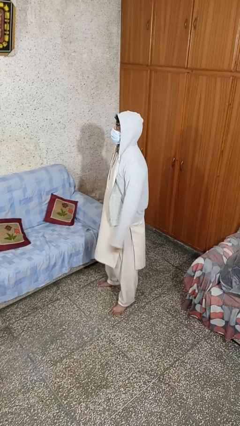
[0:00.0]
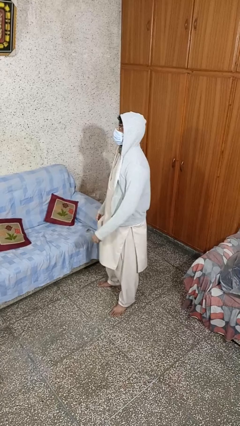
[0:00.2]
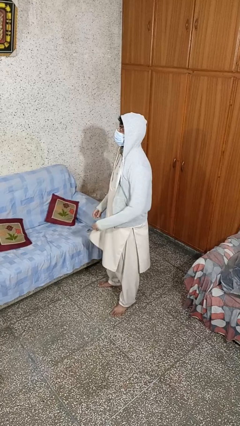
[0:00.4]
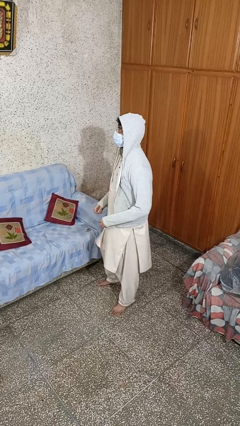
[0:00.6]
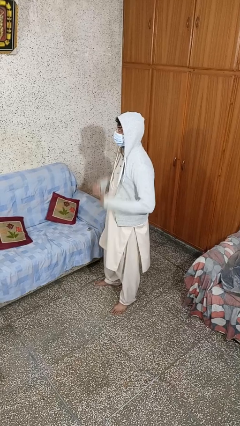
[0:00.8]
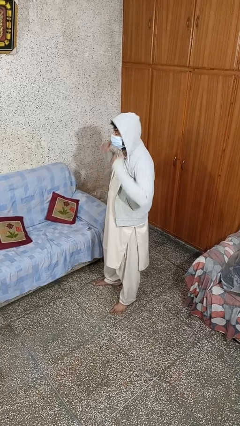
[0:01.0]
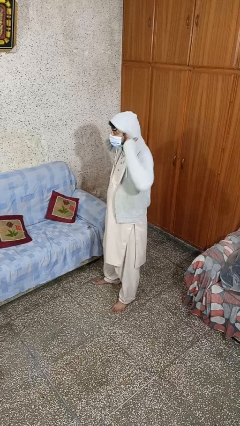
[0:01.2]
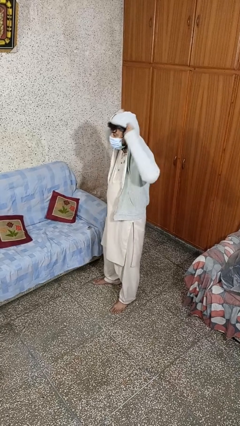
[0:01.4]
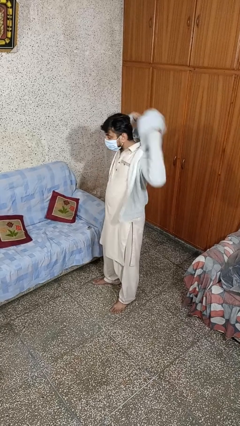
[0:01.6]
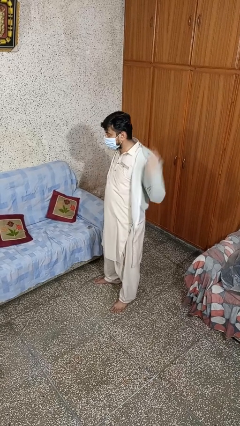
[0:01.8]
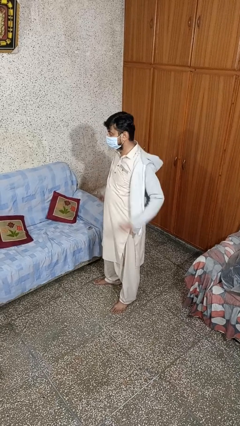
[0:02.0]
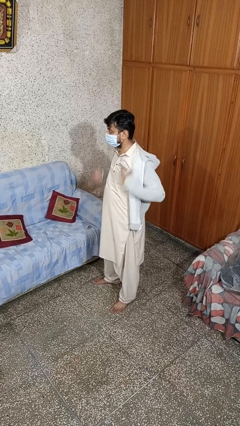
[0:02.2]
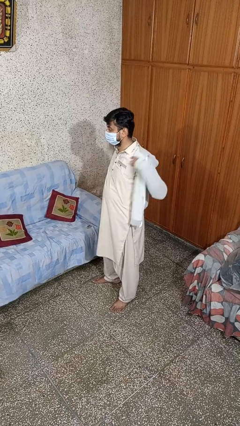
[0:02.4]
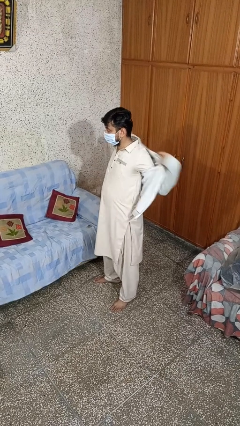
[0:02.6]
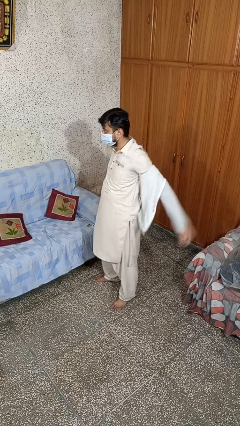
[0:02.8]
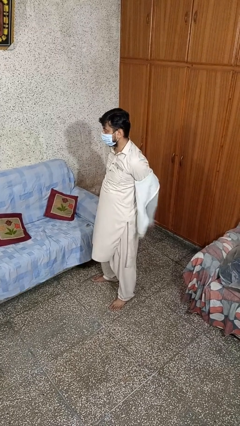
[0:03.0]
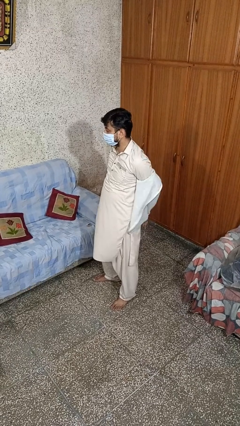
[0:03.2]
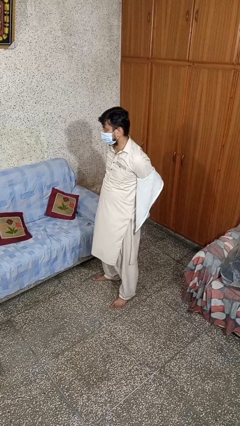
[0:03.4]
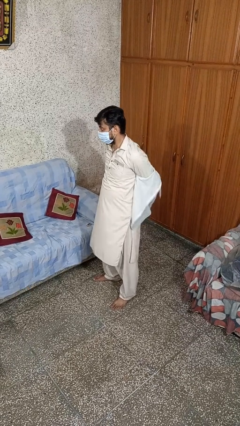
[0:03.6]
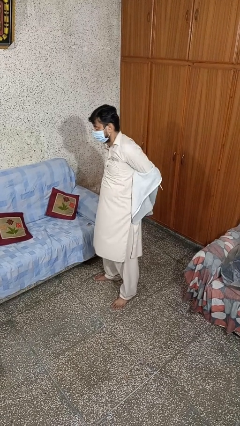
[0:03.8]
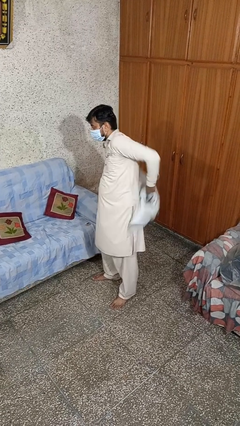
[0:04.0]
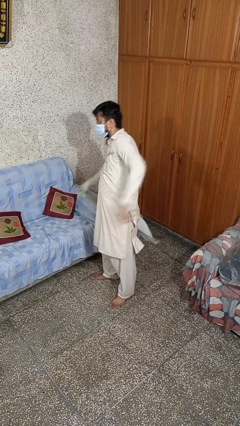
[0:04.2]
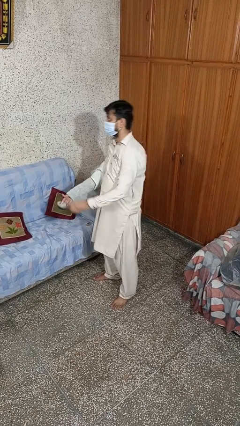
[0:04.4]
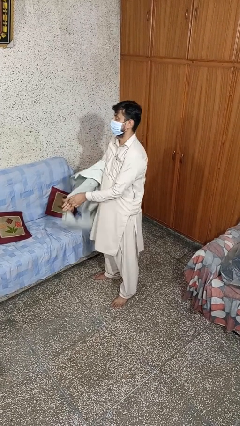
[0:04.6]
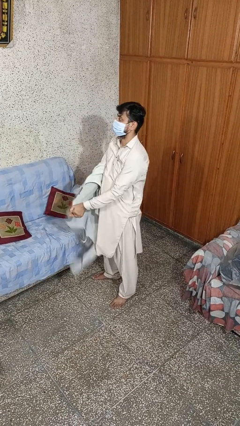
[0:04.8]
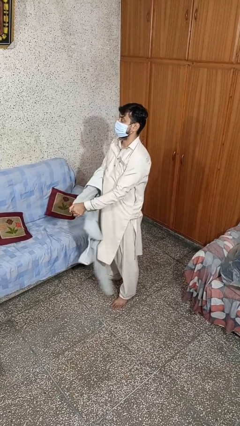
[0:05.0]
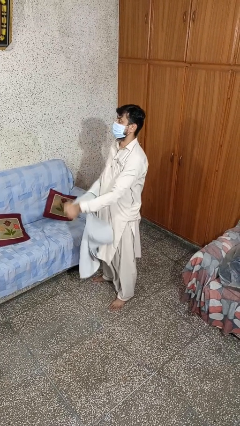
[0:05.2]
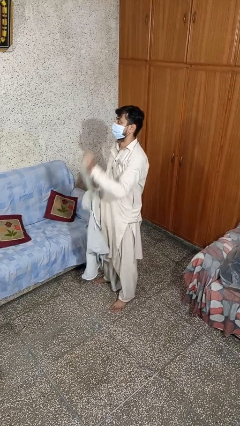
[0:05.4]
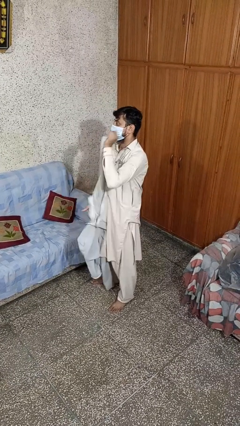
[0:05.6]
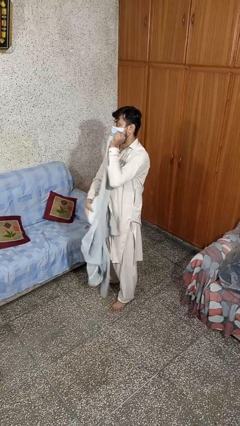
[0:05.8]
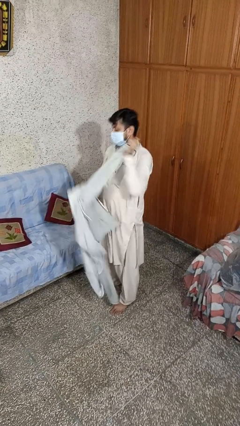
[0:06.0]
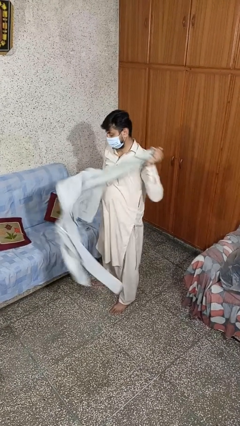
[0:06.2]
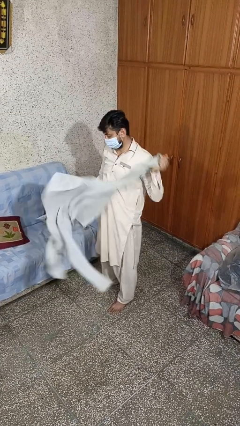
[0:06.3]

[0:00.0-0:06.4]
person takes off hoodie

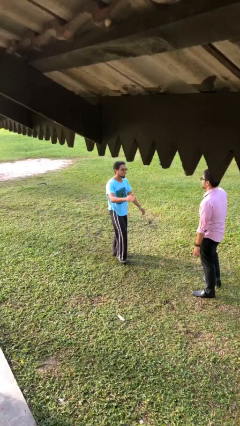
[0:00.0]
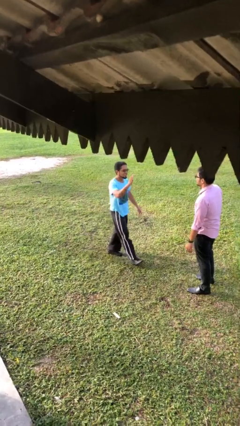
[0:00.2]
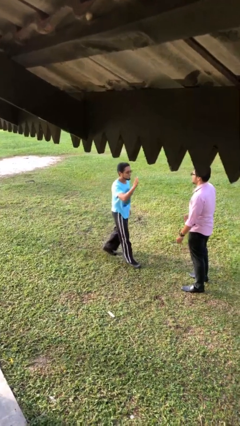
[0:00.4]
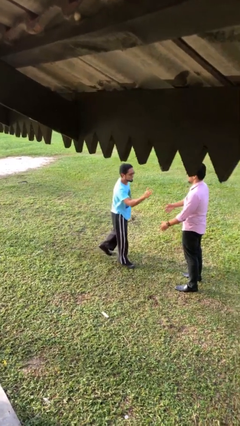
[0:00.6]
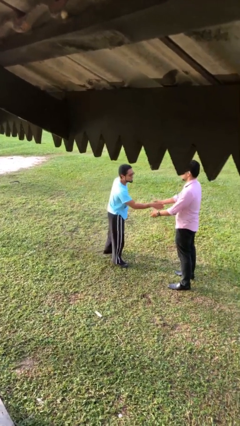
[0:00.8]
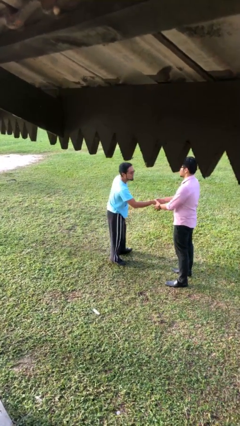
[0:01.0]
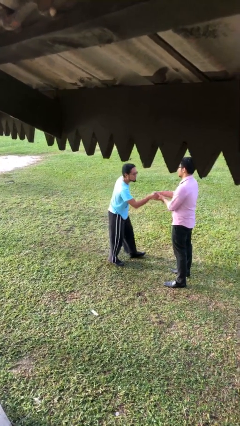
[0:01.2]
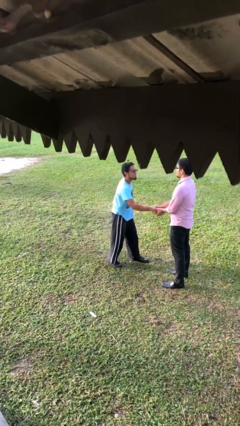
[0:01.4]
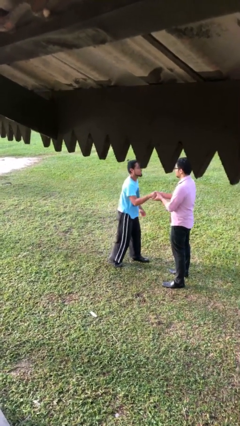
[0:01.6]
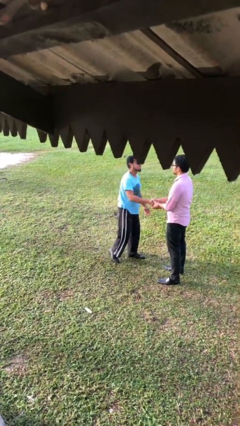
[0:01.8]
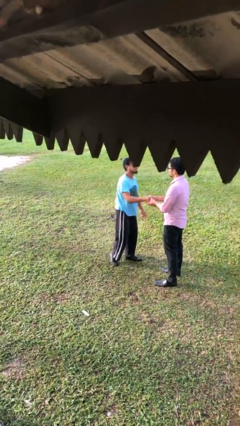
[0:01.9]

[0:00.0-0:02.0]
person shakes hand

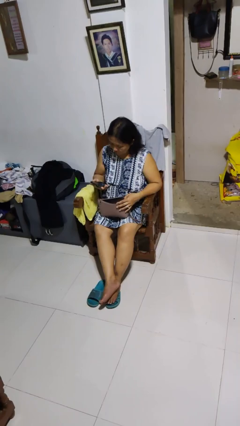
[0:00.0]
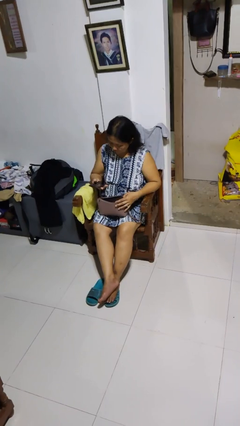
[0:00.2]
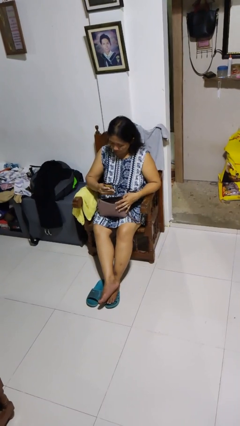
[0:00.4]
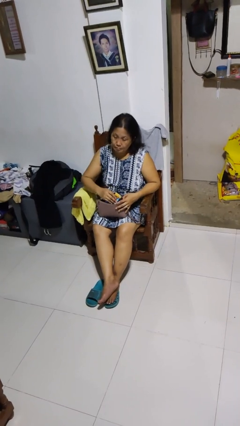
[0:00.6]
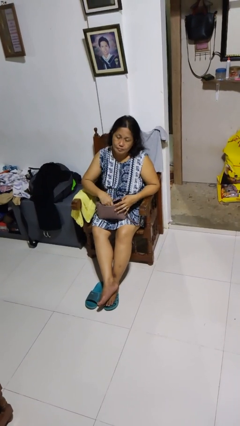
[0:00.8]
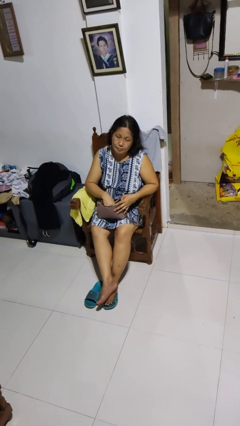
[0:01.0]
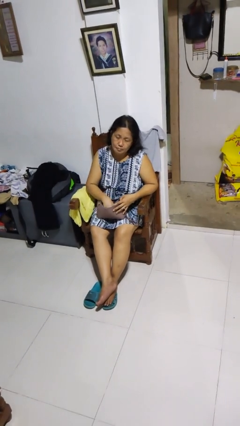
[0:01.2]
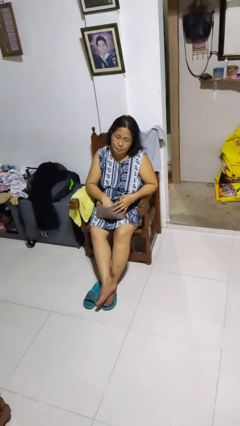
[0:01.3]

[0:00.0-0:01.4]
person puts object into purse

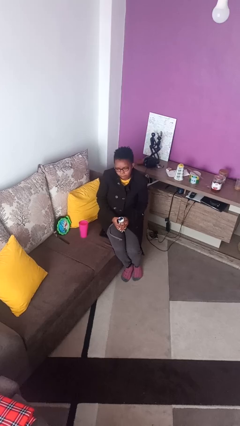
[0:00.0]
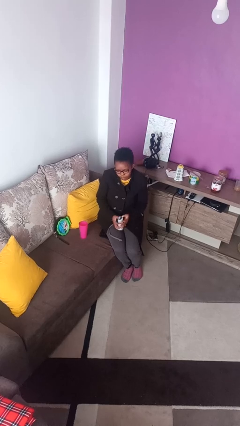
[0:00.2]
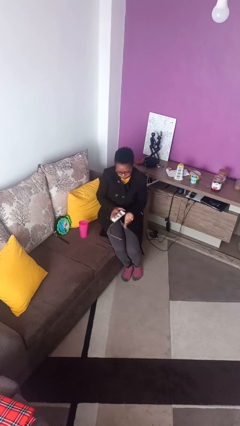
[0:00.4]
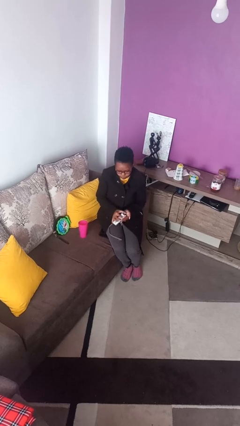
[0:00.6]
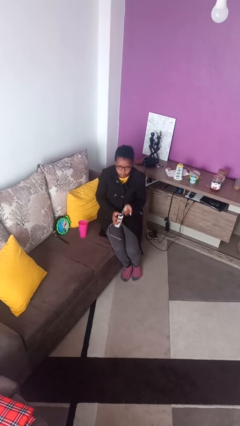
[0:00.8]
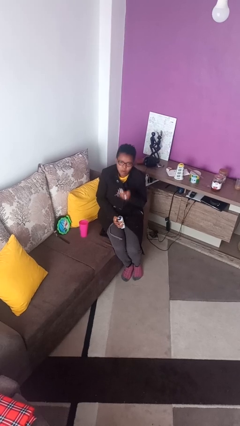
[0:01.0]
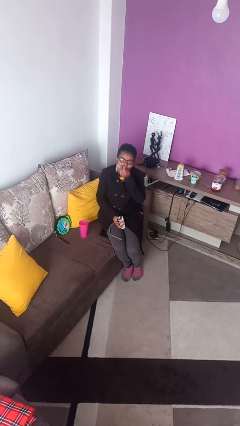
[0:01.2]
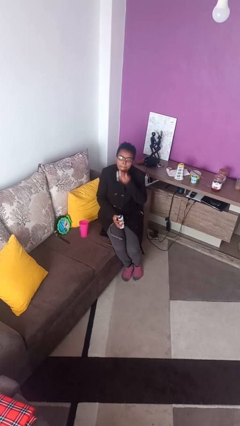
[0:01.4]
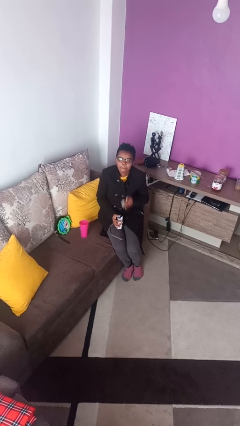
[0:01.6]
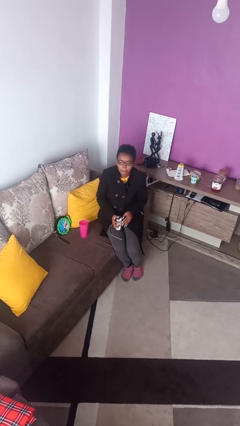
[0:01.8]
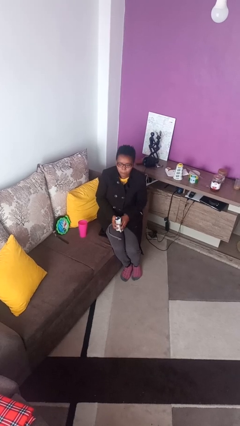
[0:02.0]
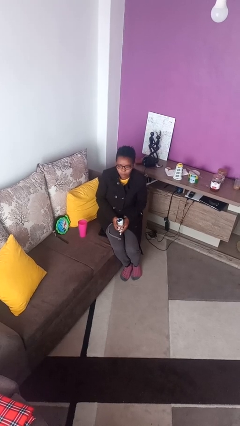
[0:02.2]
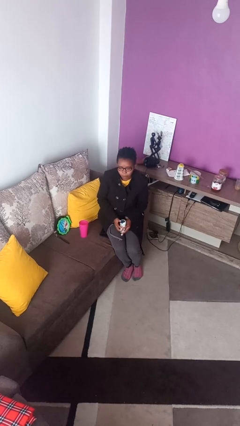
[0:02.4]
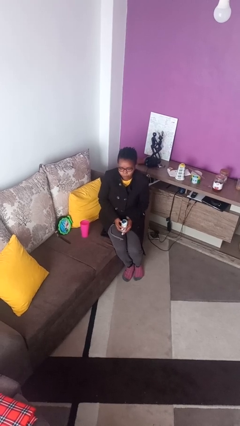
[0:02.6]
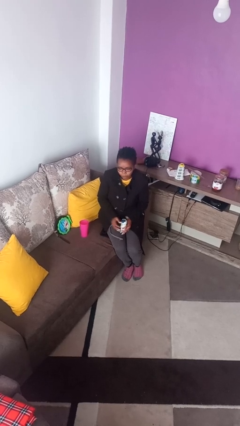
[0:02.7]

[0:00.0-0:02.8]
person takes medicine pills

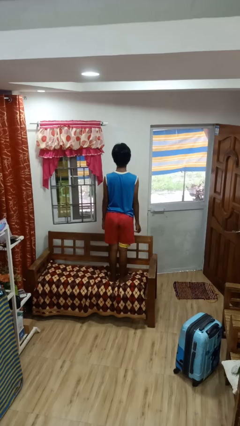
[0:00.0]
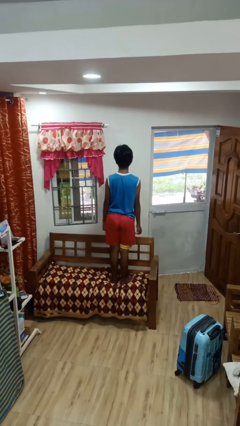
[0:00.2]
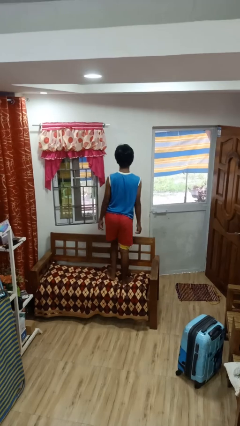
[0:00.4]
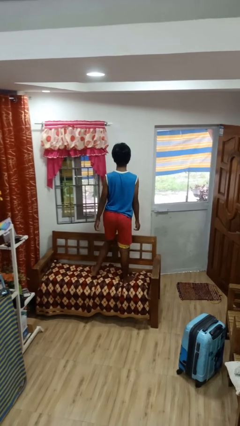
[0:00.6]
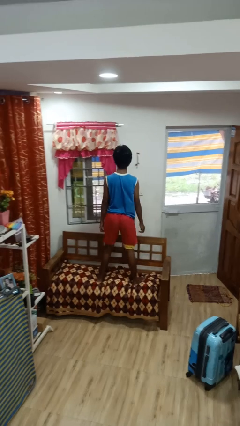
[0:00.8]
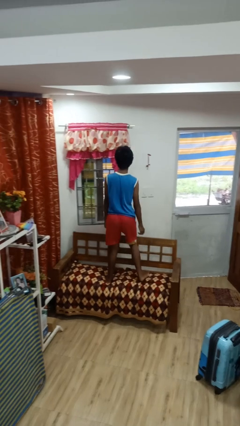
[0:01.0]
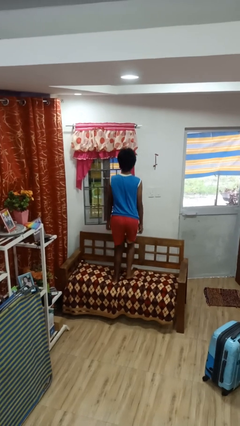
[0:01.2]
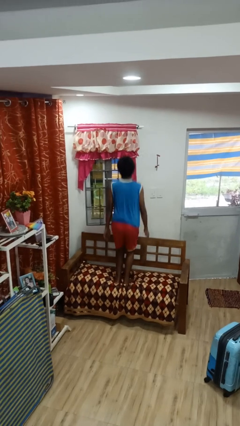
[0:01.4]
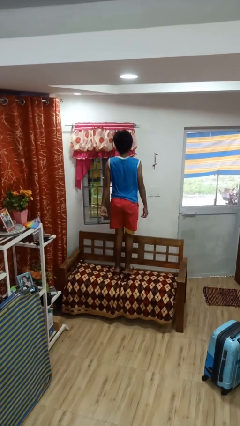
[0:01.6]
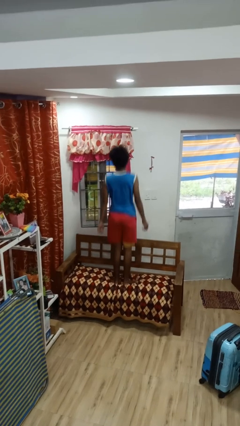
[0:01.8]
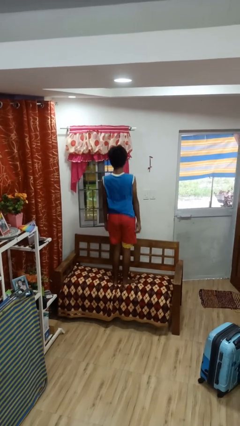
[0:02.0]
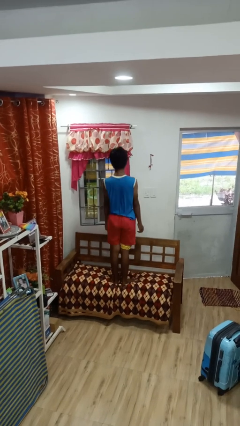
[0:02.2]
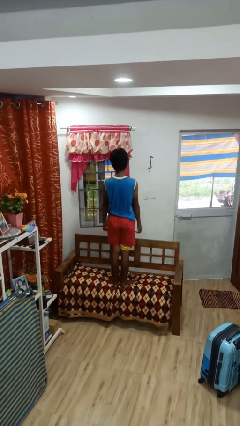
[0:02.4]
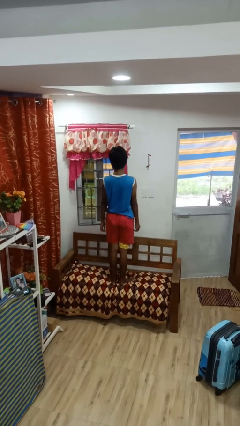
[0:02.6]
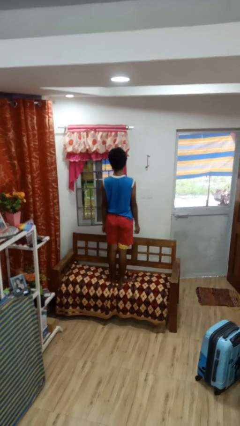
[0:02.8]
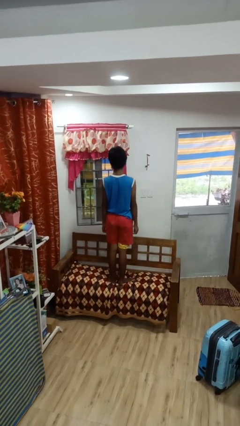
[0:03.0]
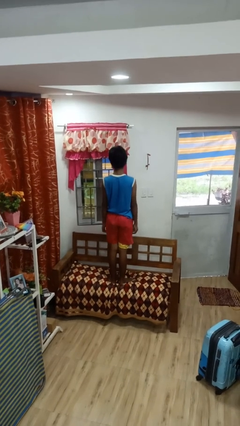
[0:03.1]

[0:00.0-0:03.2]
person jumps on couch

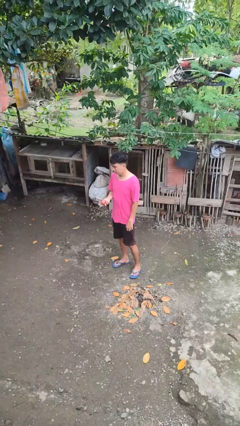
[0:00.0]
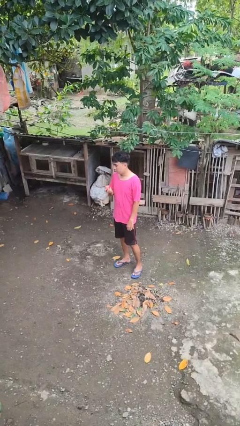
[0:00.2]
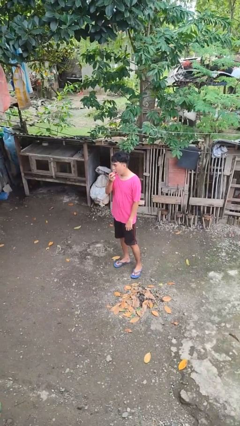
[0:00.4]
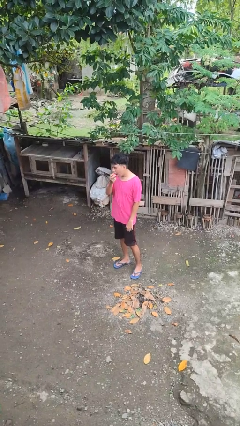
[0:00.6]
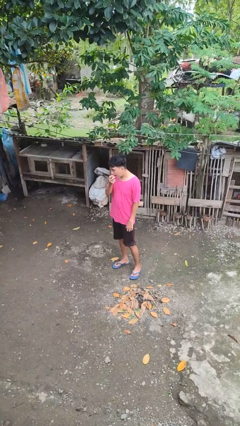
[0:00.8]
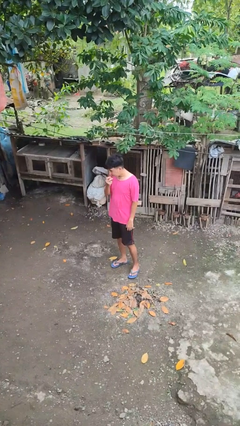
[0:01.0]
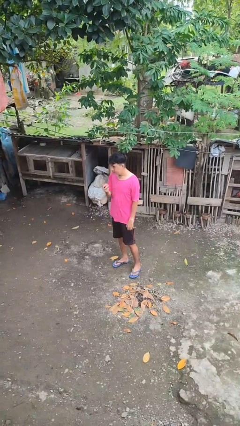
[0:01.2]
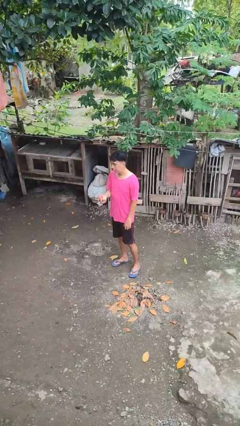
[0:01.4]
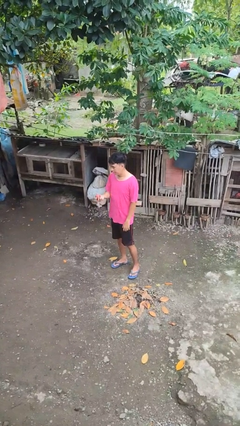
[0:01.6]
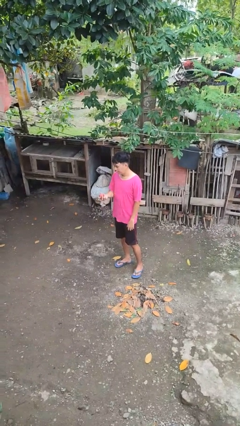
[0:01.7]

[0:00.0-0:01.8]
person eats apple
